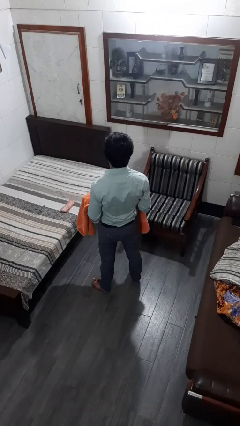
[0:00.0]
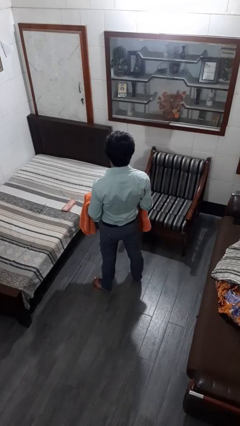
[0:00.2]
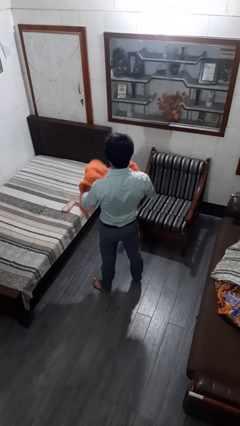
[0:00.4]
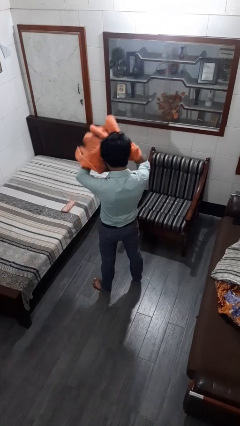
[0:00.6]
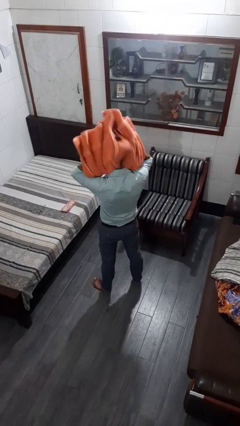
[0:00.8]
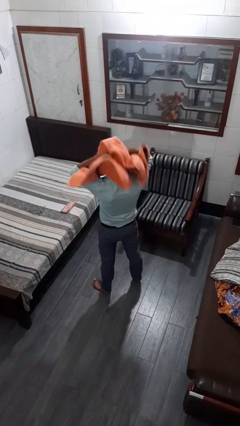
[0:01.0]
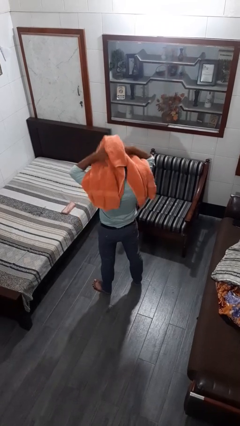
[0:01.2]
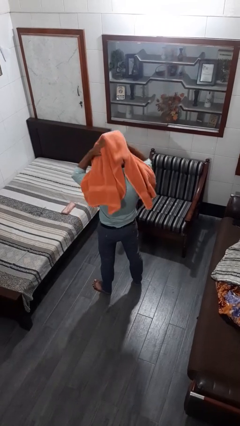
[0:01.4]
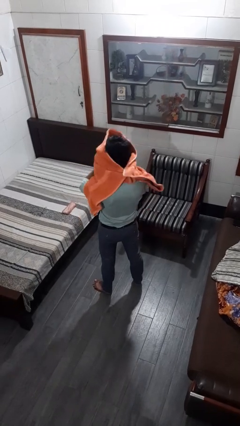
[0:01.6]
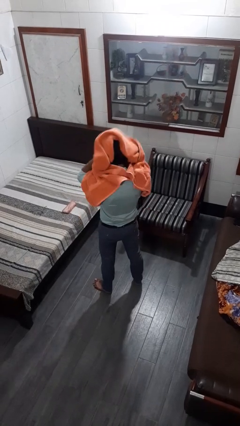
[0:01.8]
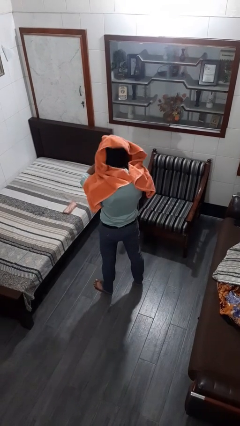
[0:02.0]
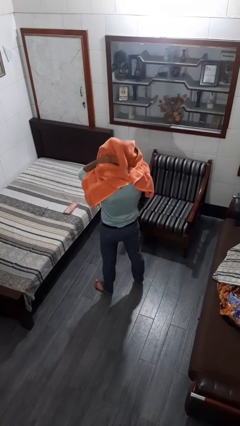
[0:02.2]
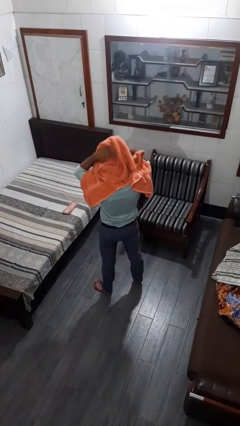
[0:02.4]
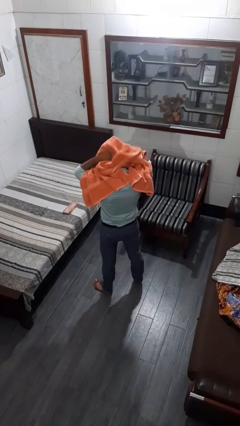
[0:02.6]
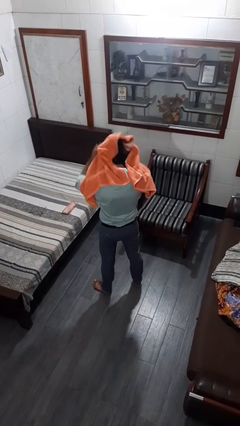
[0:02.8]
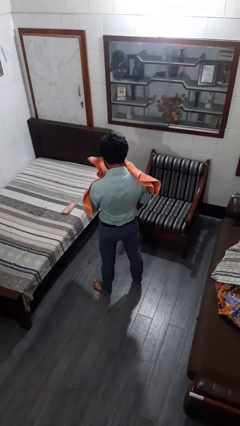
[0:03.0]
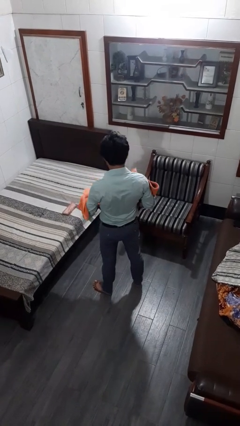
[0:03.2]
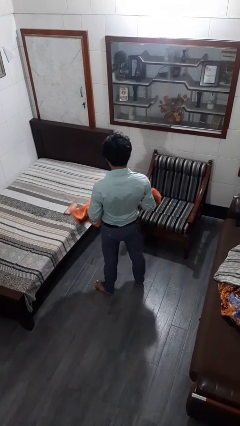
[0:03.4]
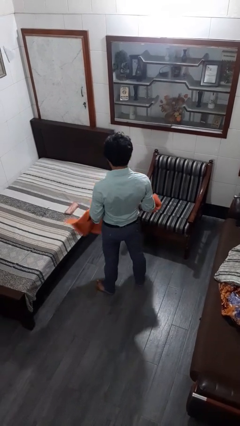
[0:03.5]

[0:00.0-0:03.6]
person dries hair with towel

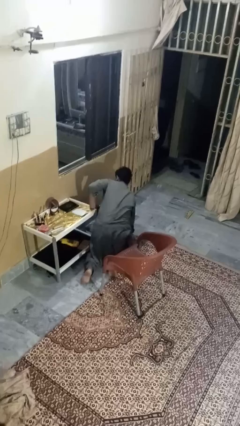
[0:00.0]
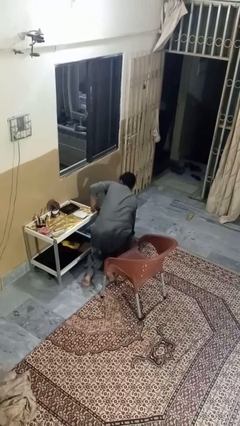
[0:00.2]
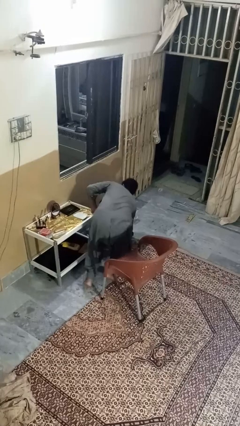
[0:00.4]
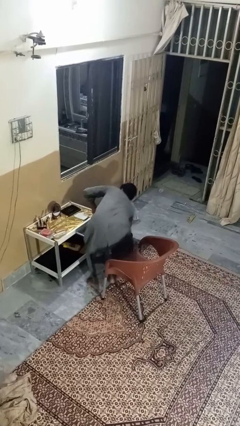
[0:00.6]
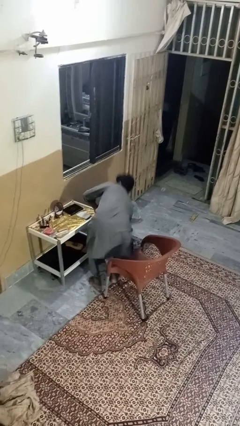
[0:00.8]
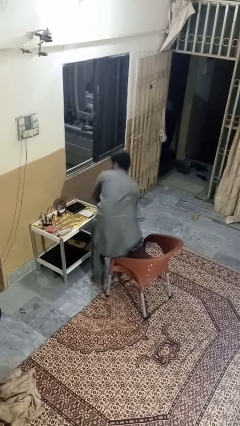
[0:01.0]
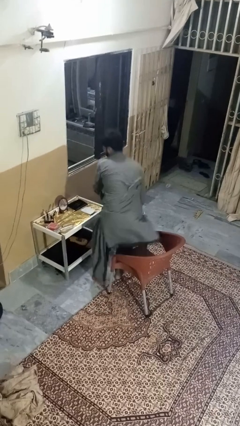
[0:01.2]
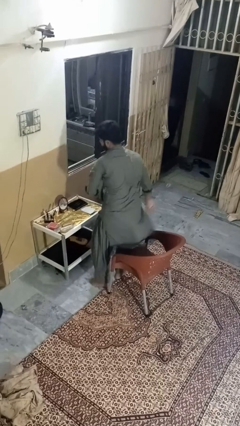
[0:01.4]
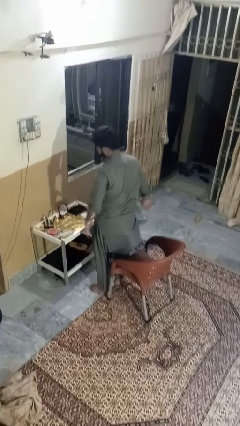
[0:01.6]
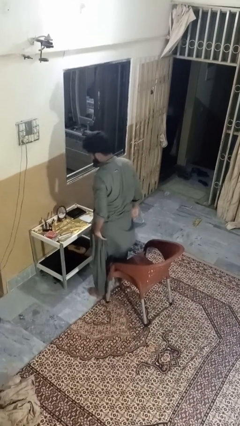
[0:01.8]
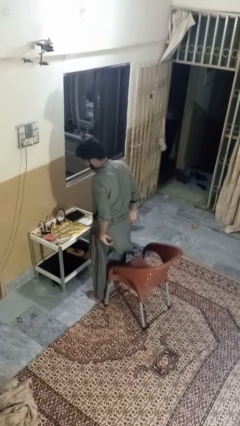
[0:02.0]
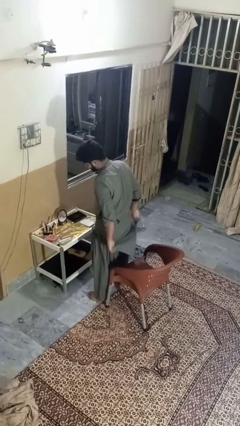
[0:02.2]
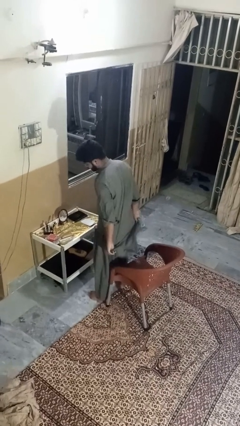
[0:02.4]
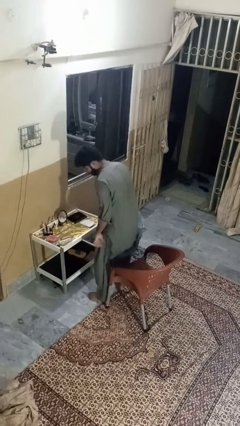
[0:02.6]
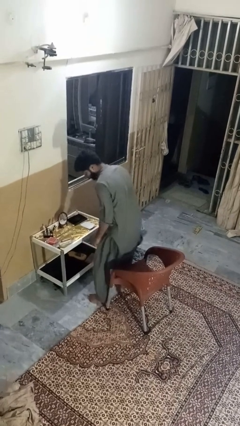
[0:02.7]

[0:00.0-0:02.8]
person stands up from floor

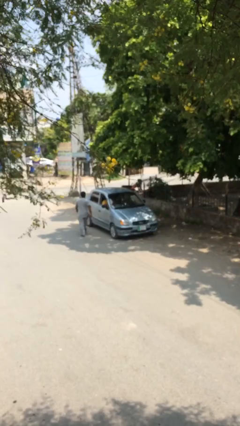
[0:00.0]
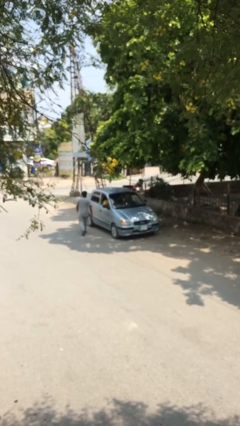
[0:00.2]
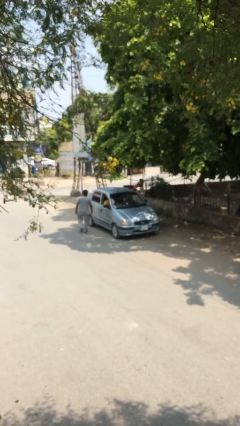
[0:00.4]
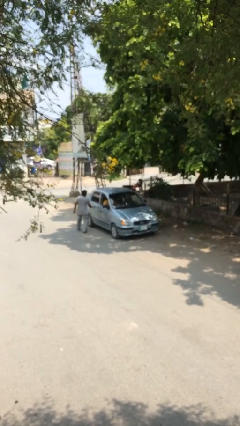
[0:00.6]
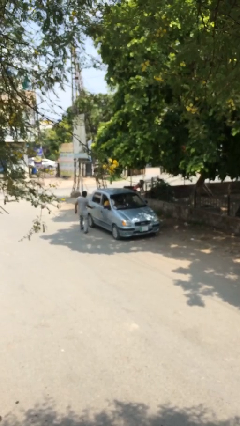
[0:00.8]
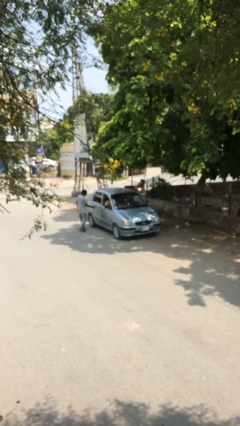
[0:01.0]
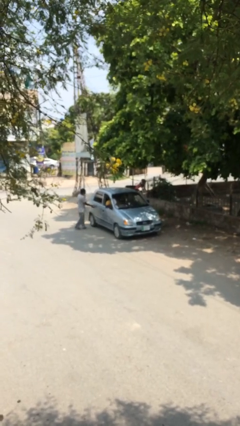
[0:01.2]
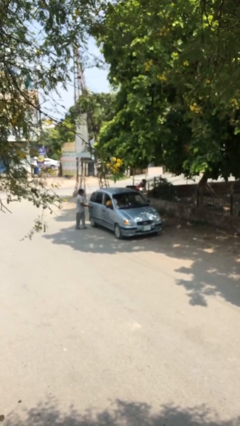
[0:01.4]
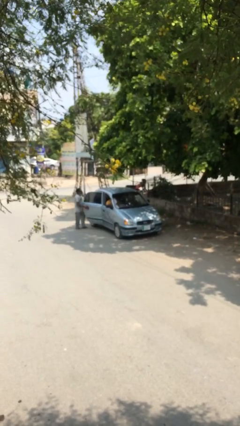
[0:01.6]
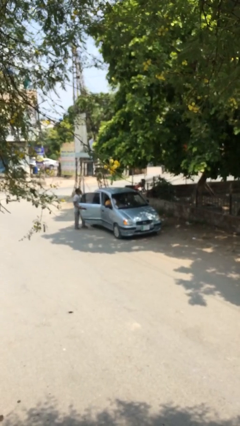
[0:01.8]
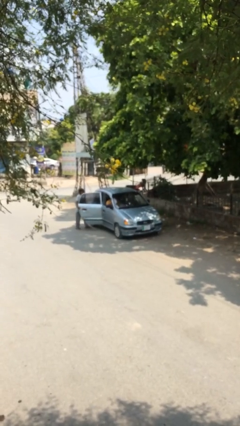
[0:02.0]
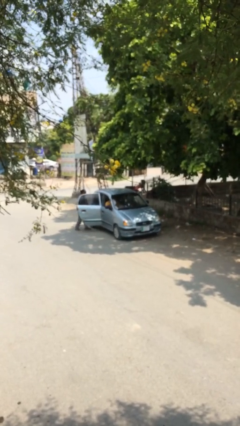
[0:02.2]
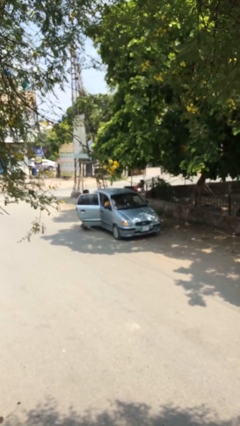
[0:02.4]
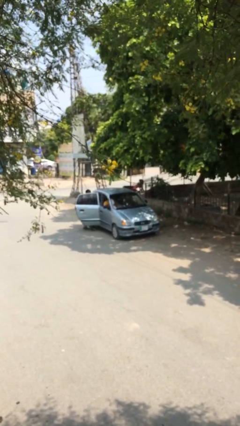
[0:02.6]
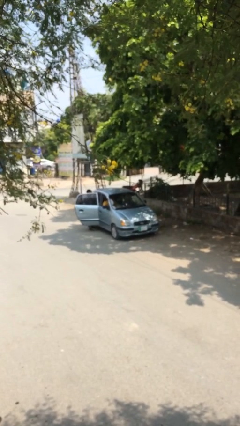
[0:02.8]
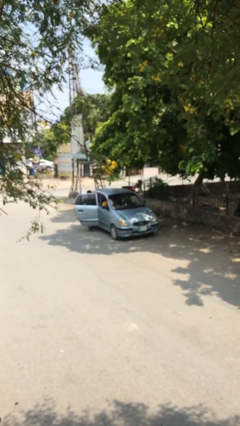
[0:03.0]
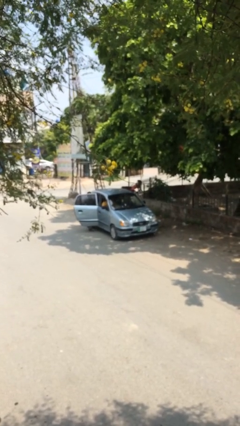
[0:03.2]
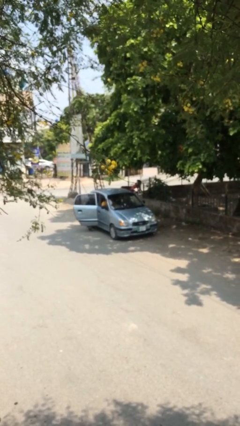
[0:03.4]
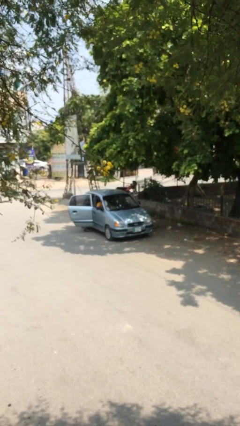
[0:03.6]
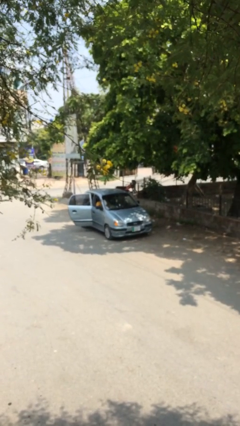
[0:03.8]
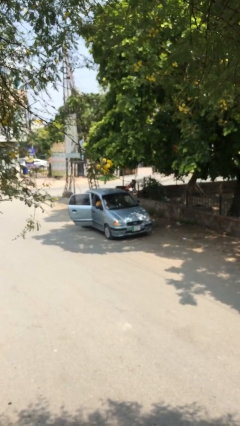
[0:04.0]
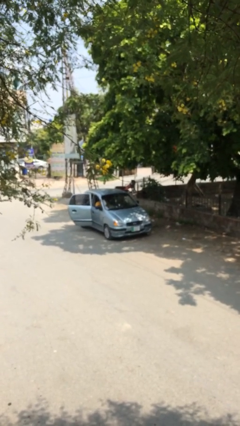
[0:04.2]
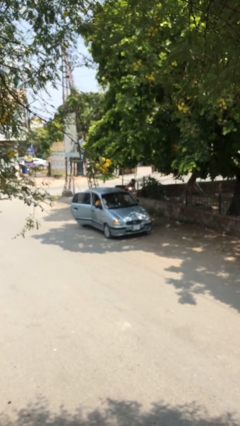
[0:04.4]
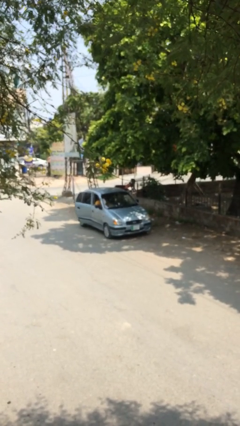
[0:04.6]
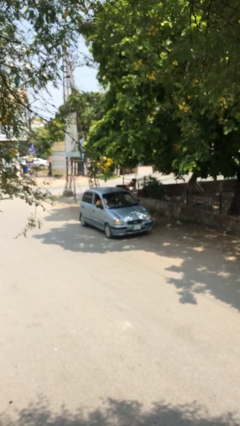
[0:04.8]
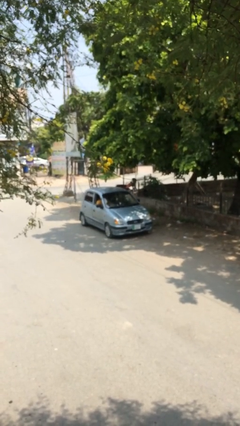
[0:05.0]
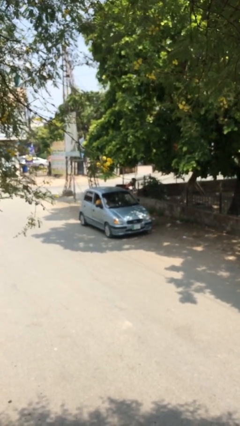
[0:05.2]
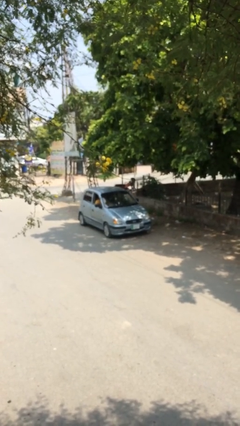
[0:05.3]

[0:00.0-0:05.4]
car picks up person

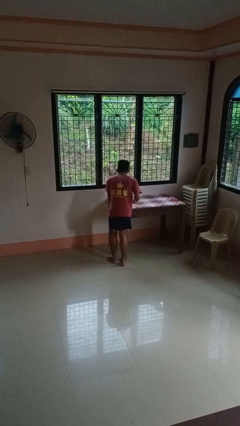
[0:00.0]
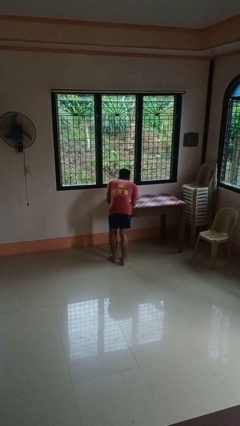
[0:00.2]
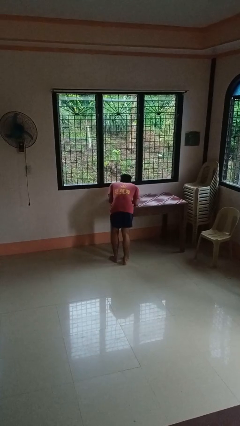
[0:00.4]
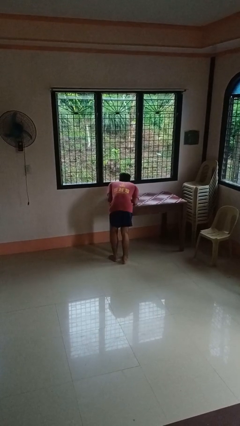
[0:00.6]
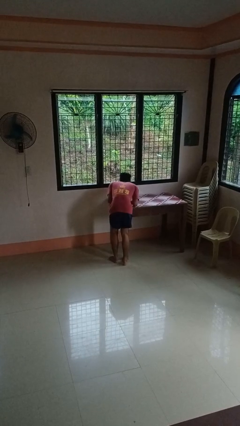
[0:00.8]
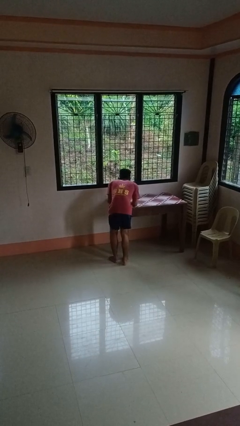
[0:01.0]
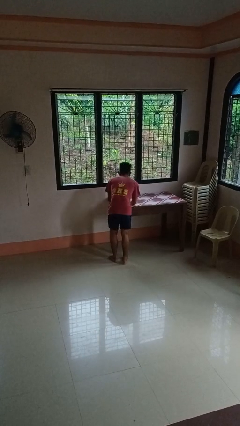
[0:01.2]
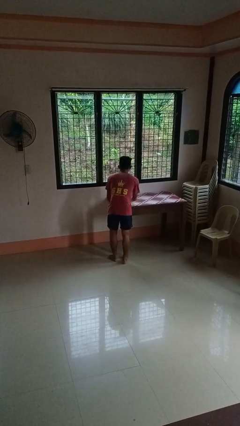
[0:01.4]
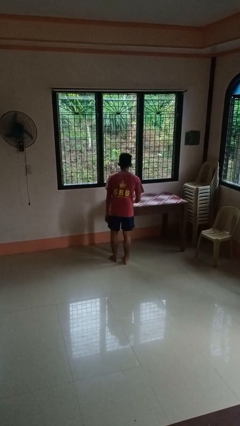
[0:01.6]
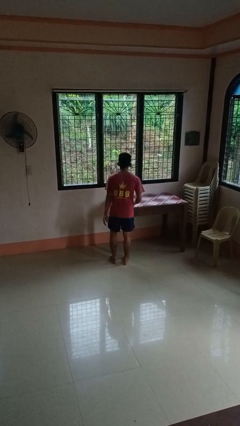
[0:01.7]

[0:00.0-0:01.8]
person bumps into table

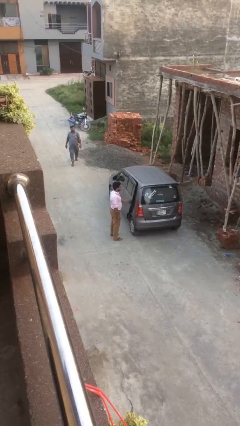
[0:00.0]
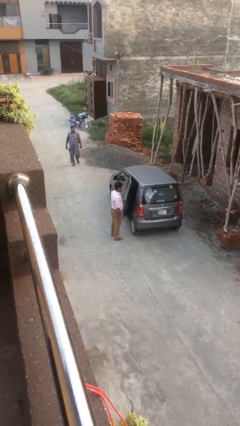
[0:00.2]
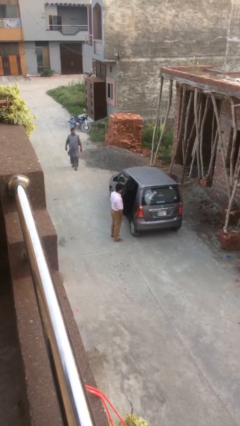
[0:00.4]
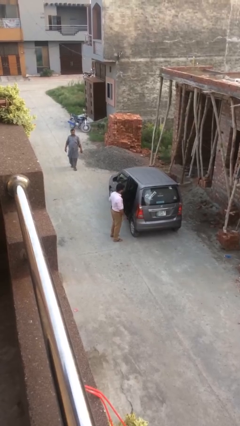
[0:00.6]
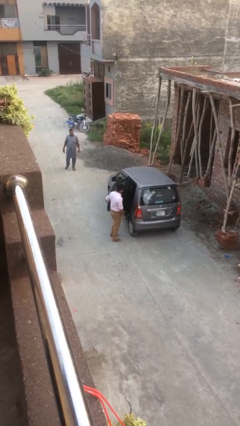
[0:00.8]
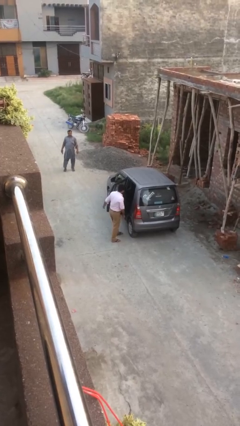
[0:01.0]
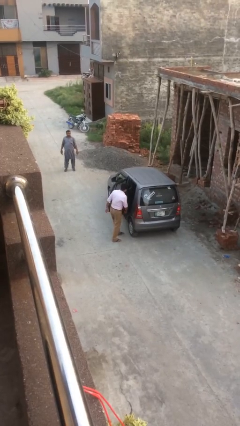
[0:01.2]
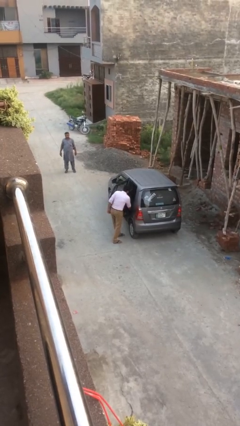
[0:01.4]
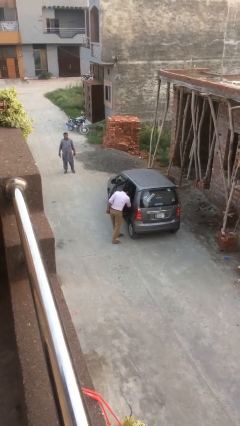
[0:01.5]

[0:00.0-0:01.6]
person opens car door

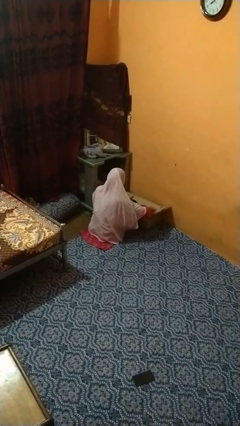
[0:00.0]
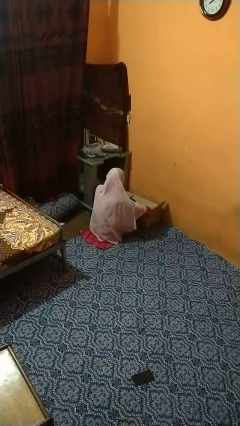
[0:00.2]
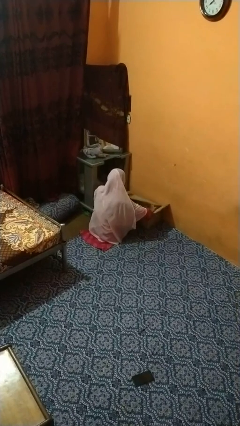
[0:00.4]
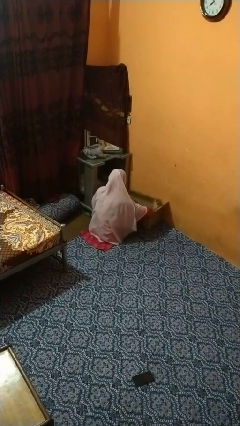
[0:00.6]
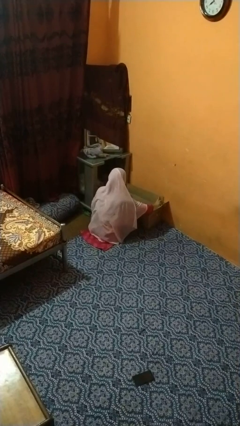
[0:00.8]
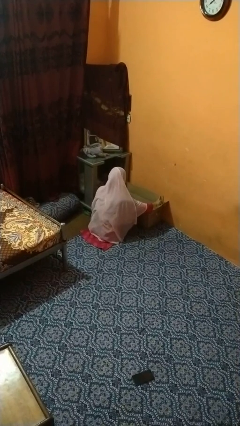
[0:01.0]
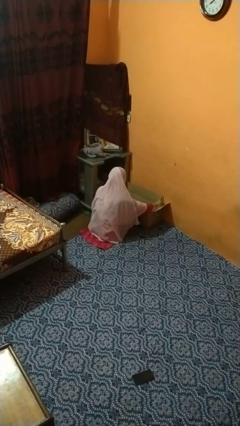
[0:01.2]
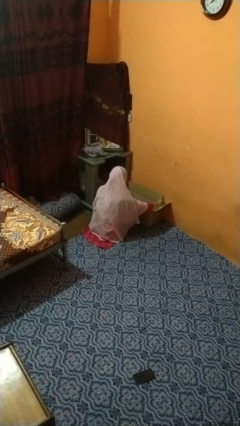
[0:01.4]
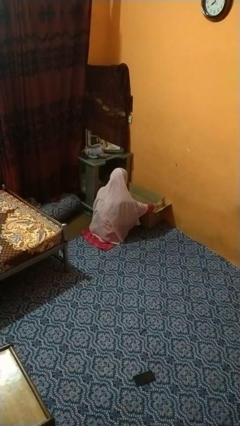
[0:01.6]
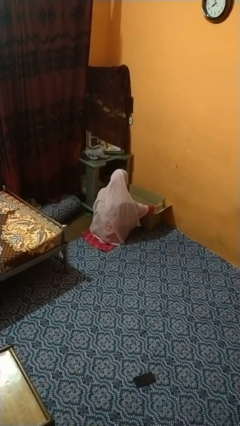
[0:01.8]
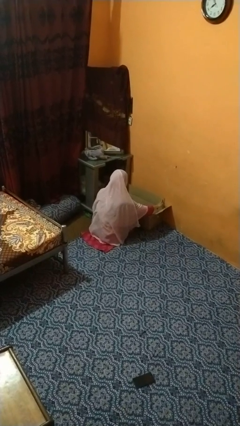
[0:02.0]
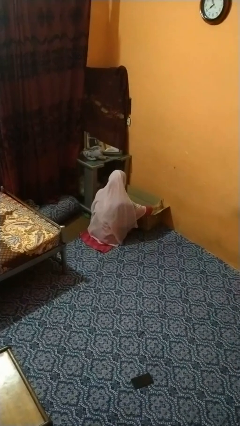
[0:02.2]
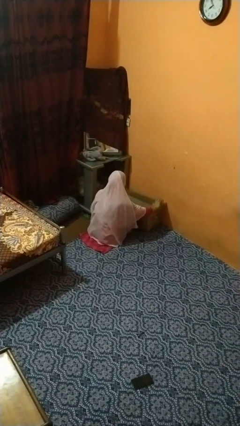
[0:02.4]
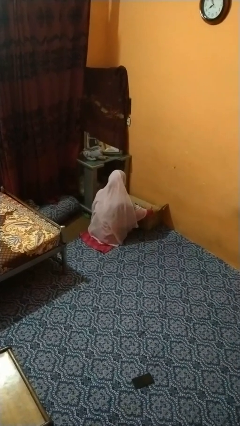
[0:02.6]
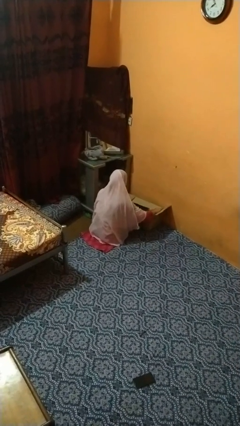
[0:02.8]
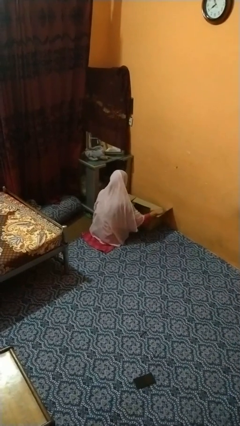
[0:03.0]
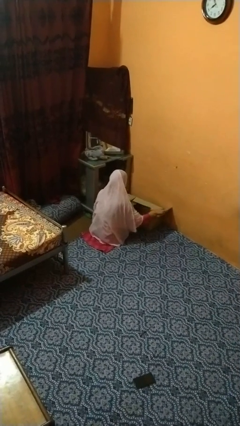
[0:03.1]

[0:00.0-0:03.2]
person opens box
